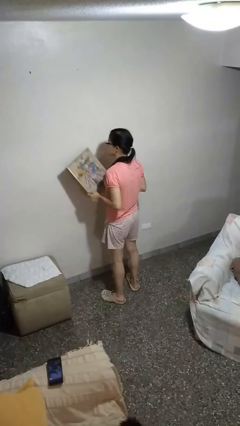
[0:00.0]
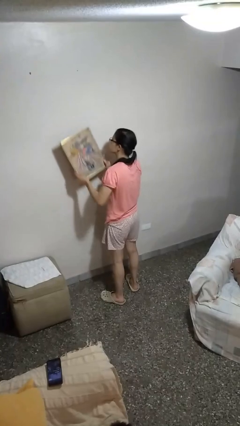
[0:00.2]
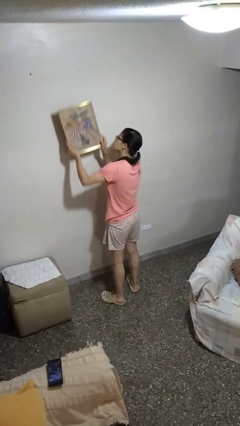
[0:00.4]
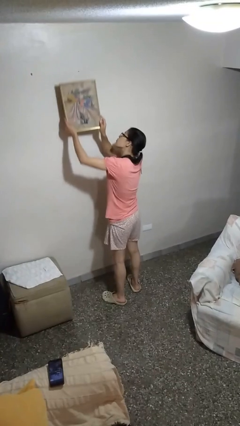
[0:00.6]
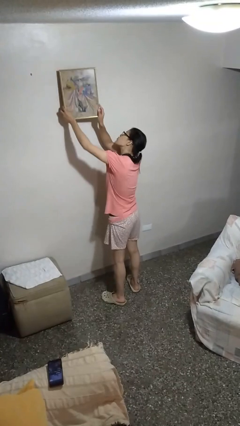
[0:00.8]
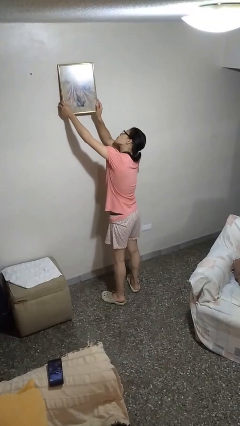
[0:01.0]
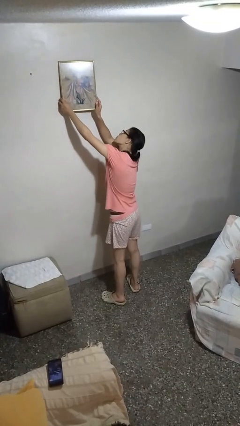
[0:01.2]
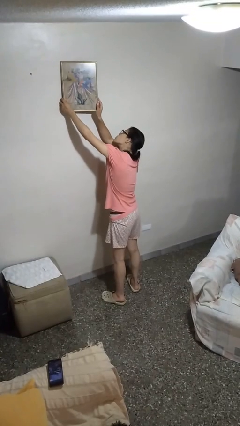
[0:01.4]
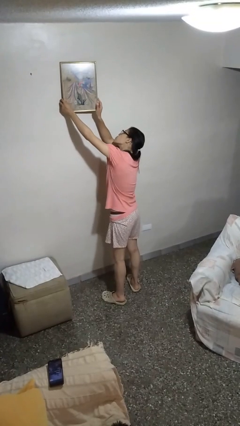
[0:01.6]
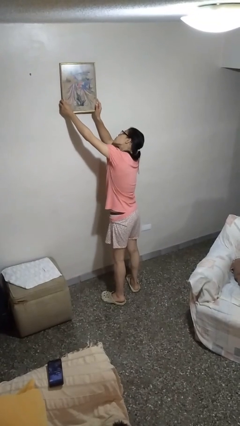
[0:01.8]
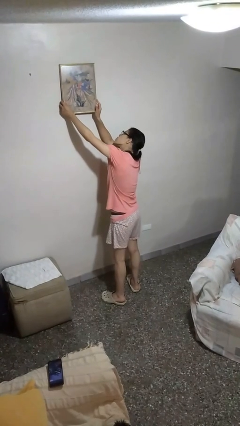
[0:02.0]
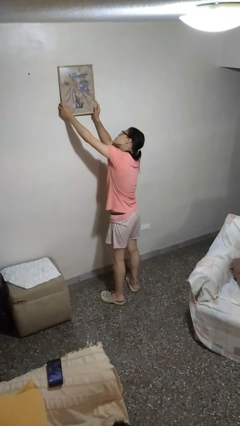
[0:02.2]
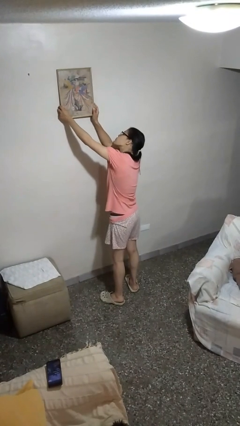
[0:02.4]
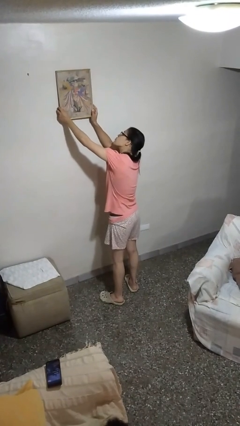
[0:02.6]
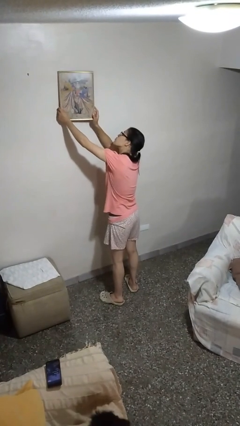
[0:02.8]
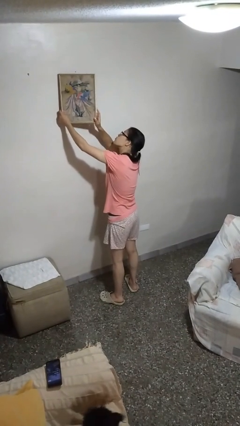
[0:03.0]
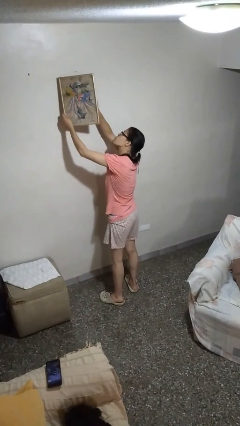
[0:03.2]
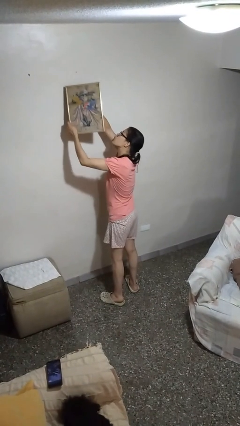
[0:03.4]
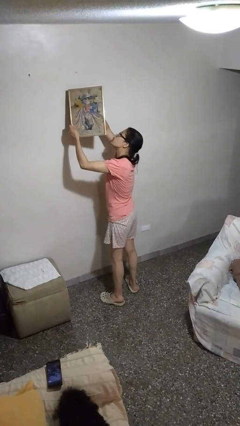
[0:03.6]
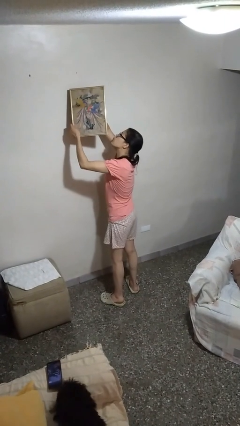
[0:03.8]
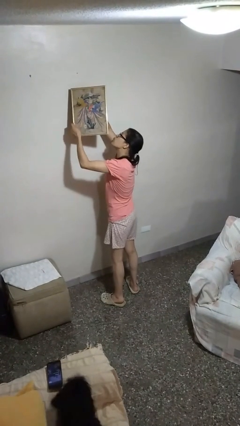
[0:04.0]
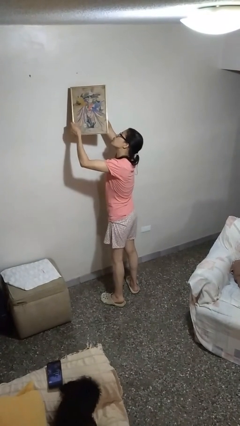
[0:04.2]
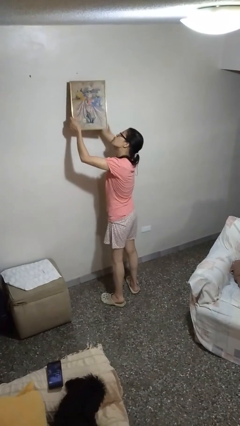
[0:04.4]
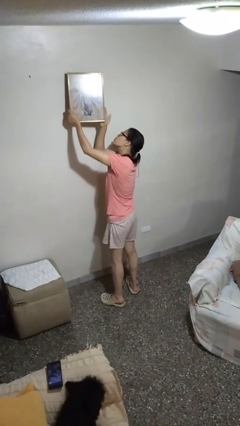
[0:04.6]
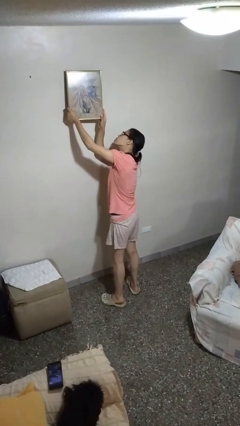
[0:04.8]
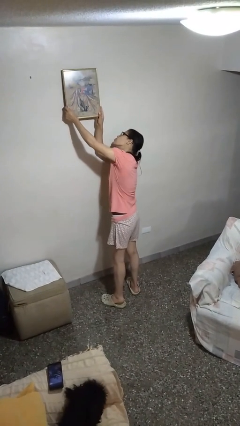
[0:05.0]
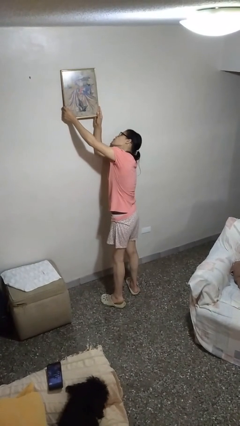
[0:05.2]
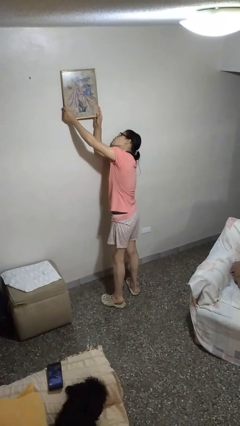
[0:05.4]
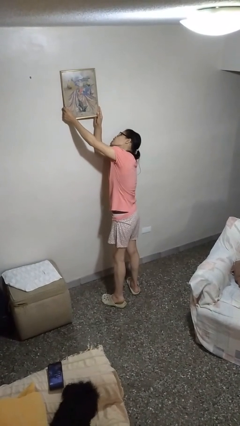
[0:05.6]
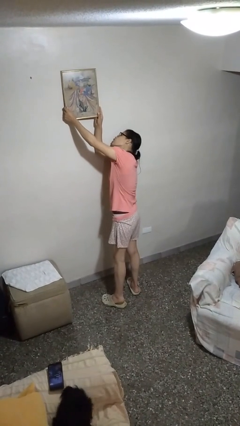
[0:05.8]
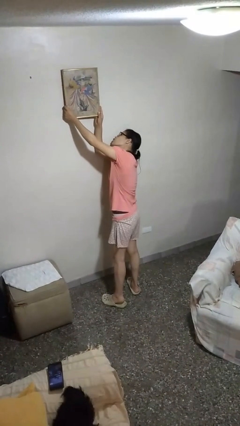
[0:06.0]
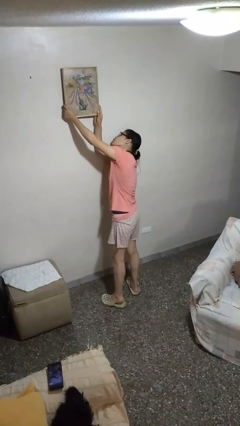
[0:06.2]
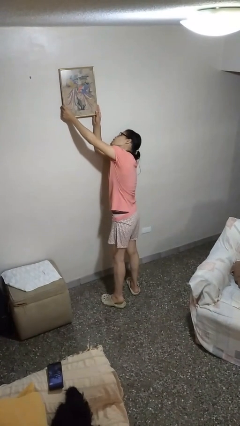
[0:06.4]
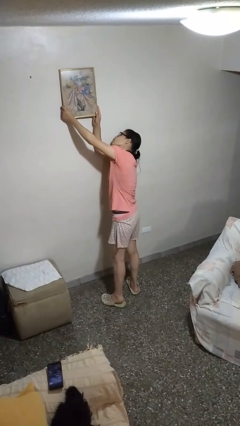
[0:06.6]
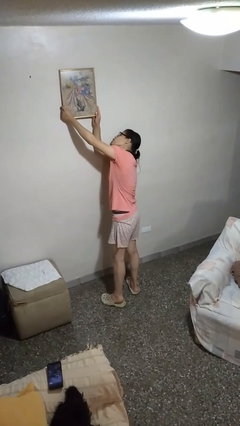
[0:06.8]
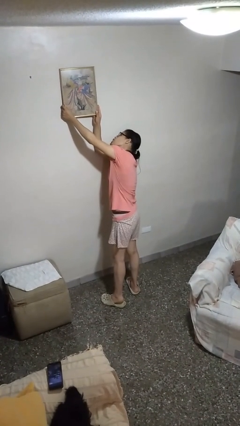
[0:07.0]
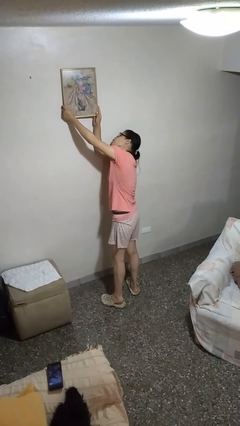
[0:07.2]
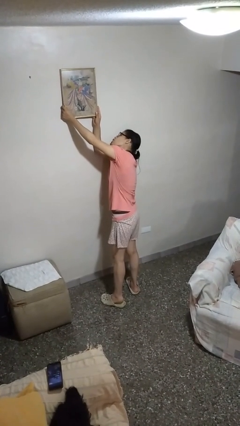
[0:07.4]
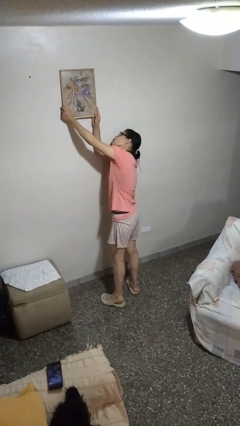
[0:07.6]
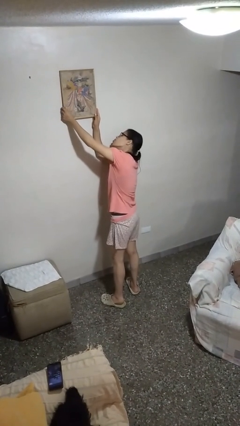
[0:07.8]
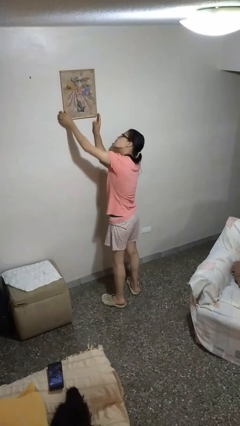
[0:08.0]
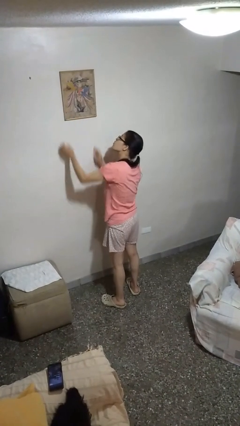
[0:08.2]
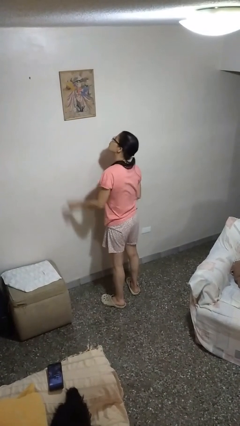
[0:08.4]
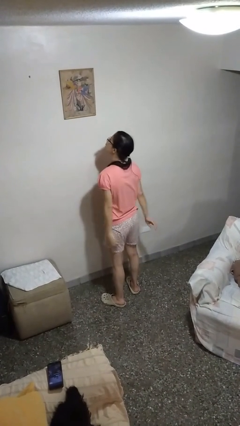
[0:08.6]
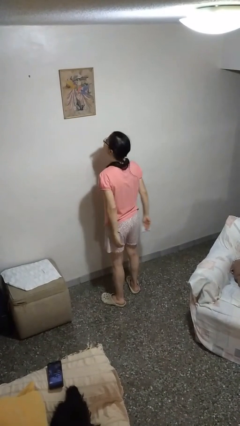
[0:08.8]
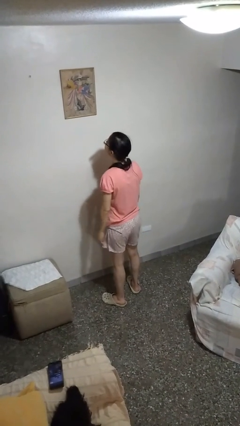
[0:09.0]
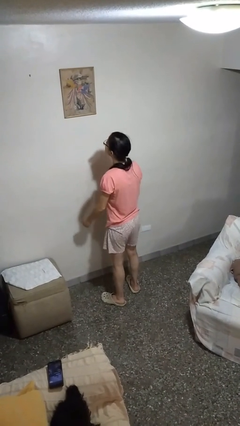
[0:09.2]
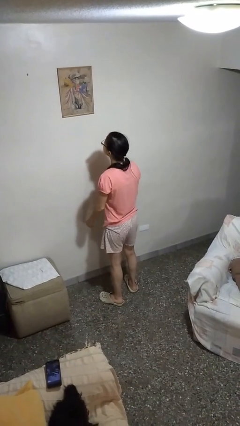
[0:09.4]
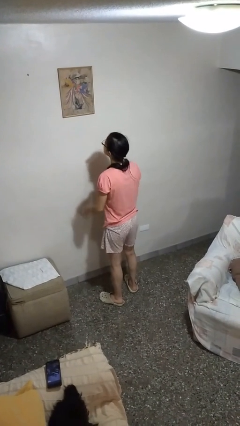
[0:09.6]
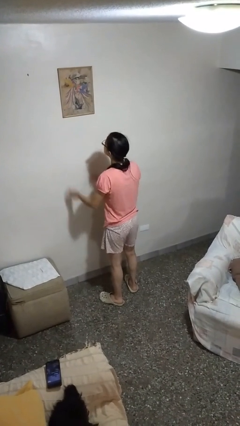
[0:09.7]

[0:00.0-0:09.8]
person puts up picture frame

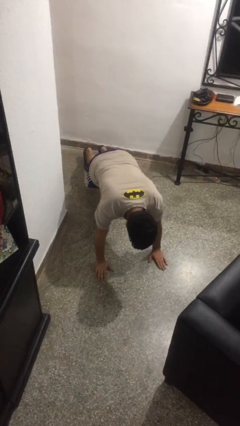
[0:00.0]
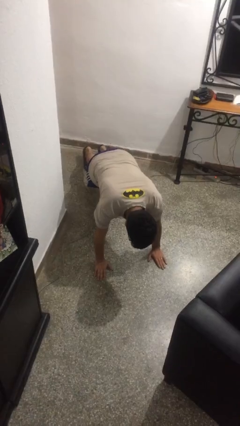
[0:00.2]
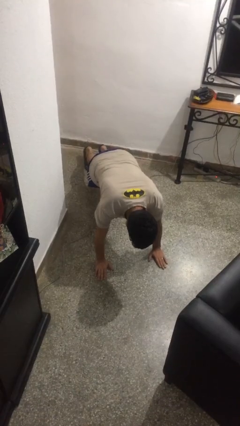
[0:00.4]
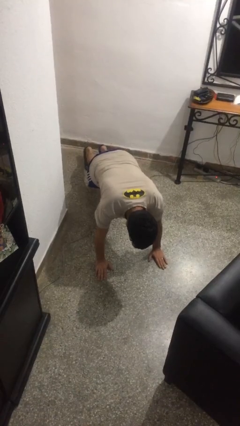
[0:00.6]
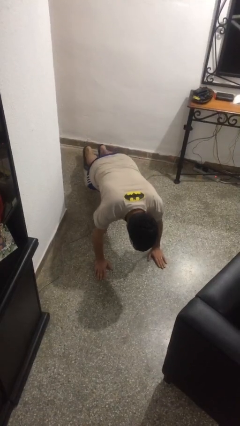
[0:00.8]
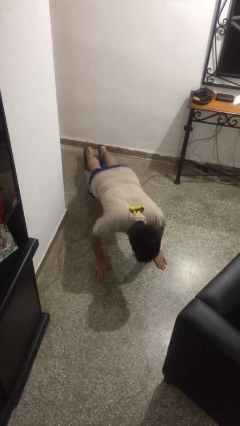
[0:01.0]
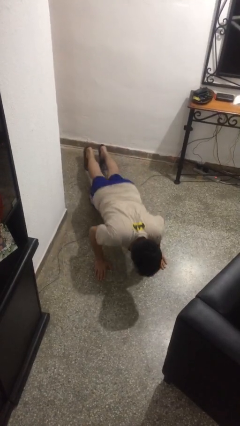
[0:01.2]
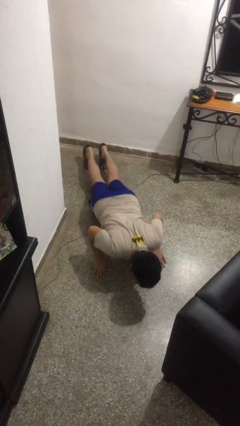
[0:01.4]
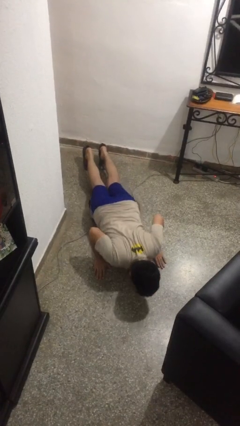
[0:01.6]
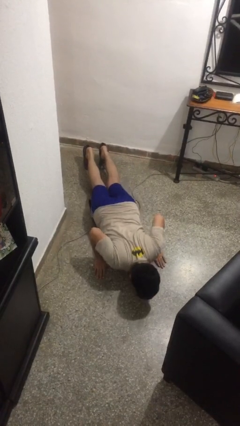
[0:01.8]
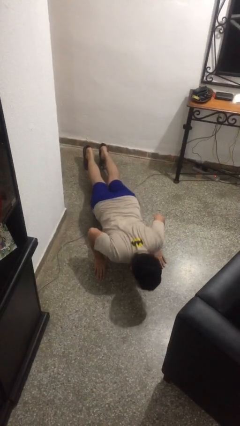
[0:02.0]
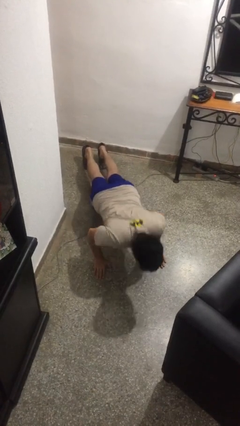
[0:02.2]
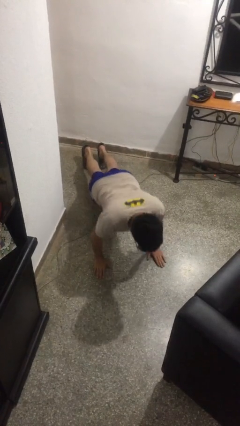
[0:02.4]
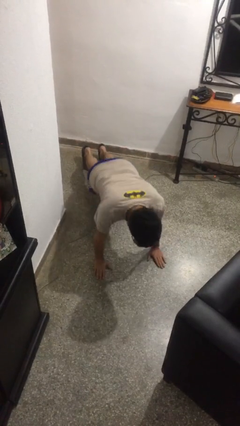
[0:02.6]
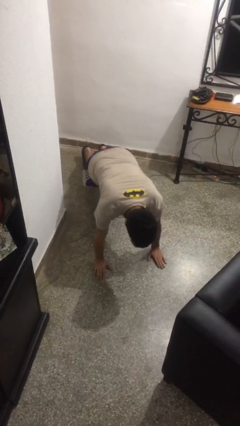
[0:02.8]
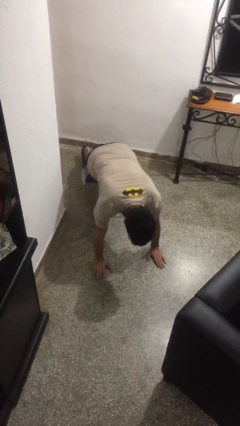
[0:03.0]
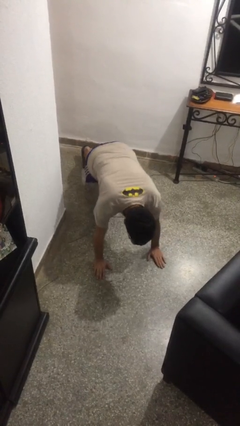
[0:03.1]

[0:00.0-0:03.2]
person exercises with pushup

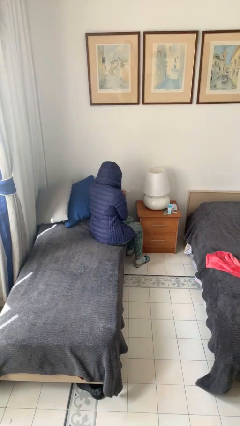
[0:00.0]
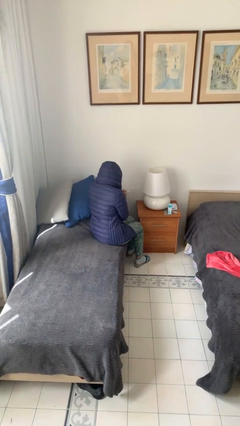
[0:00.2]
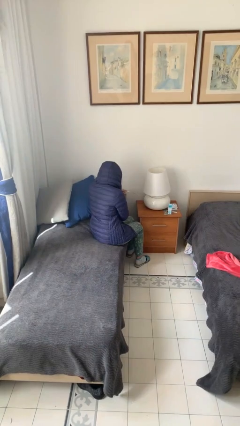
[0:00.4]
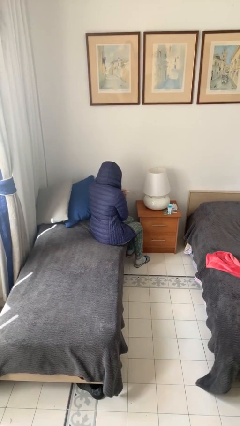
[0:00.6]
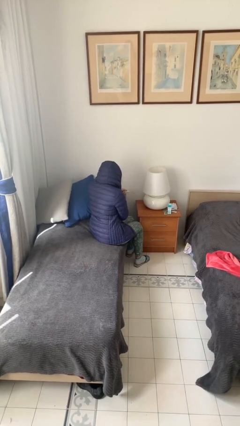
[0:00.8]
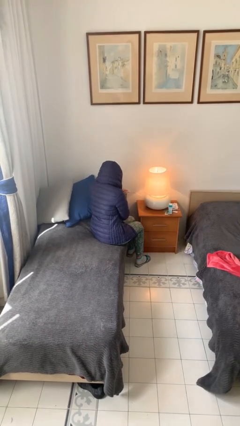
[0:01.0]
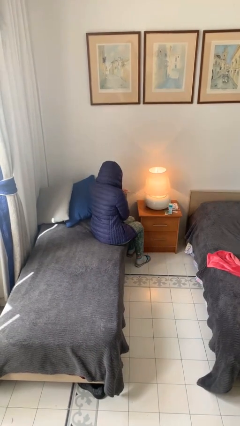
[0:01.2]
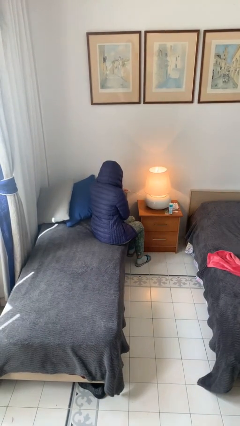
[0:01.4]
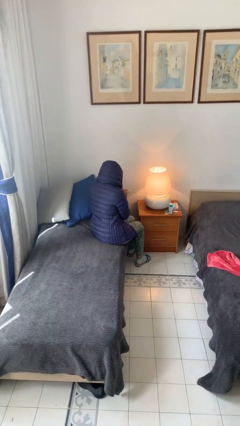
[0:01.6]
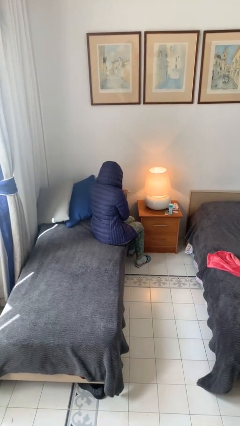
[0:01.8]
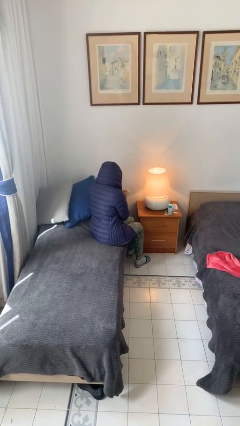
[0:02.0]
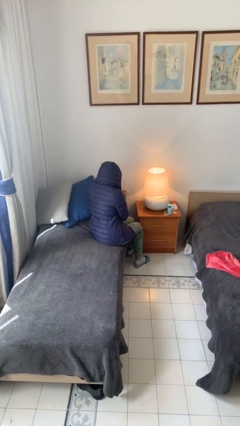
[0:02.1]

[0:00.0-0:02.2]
person turns on lamp

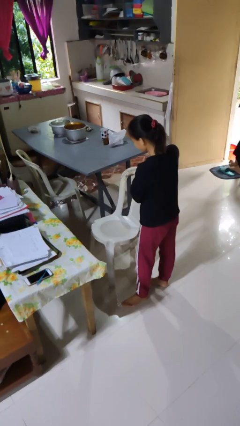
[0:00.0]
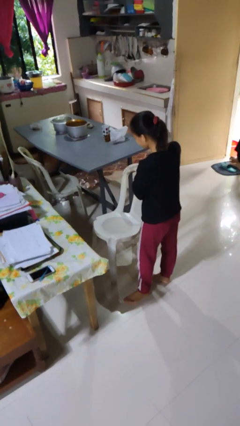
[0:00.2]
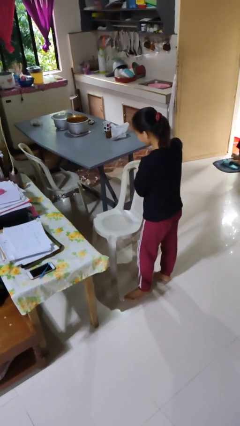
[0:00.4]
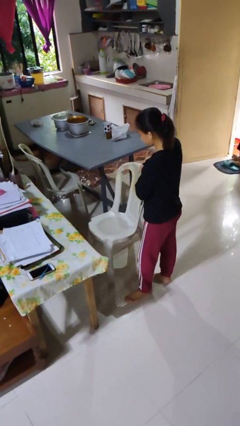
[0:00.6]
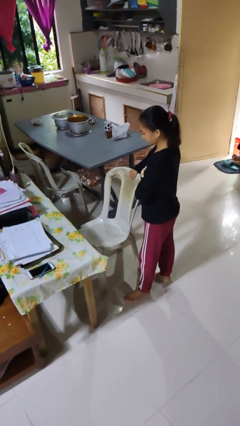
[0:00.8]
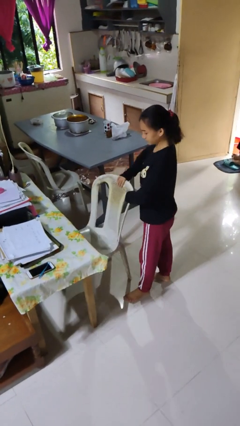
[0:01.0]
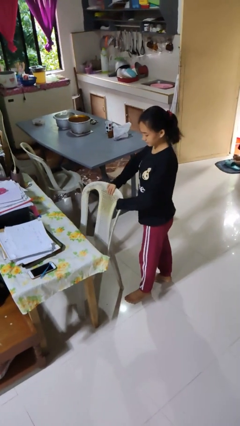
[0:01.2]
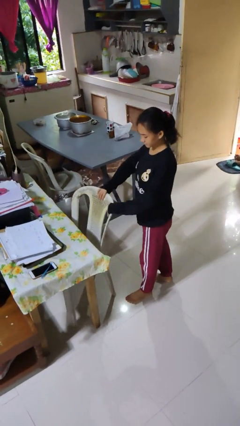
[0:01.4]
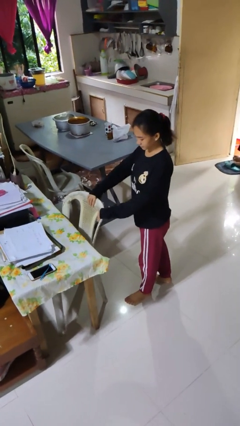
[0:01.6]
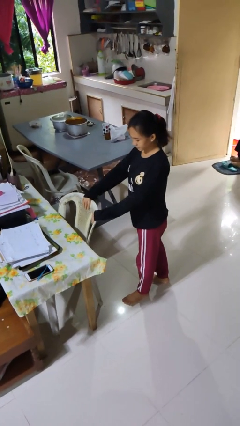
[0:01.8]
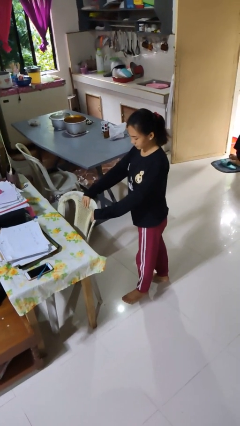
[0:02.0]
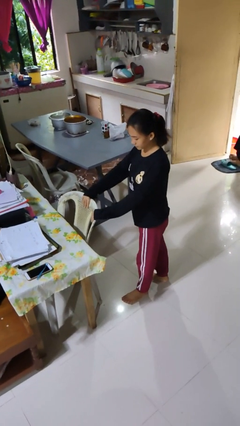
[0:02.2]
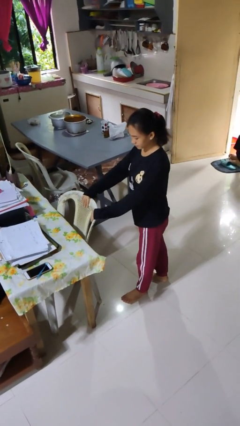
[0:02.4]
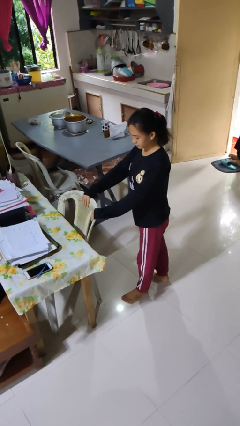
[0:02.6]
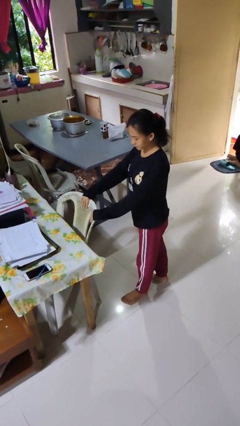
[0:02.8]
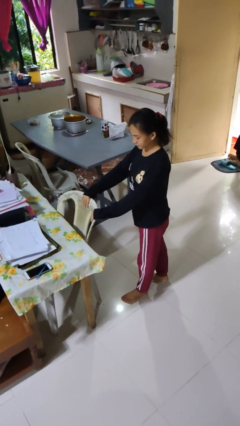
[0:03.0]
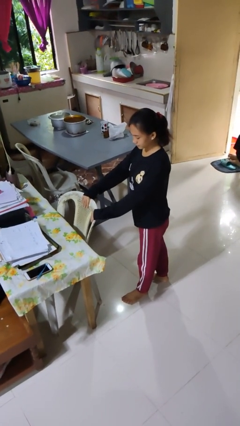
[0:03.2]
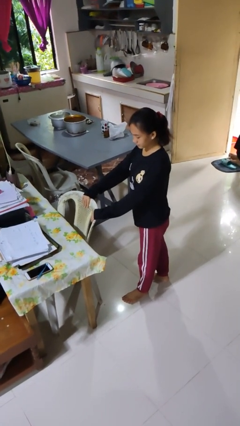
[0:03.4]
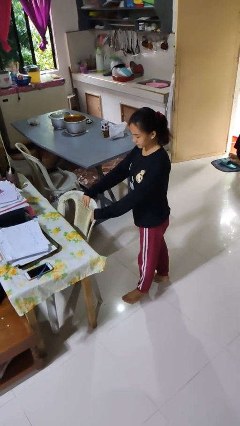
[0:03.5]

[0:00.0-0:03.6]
person pushes in chair
